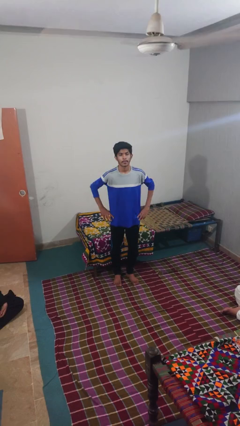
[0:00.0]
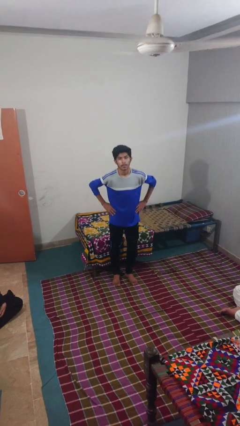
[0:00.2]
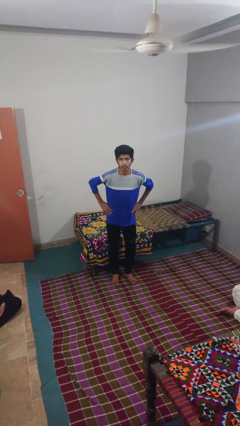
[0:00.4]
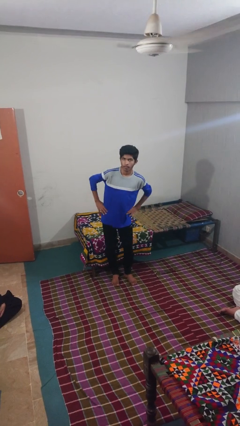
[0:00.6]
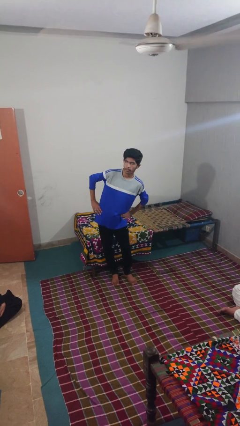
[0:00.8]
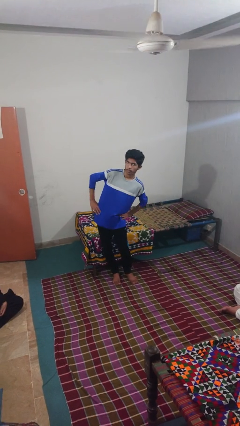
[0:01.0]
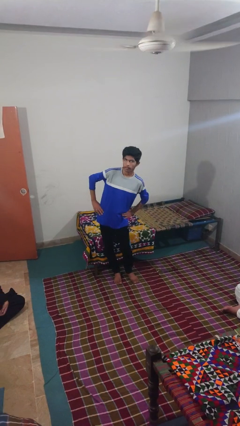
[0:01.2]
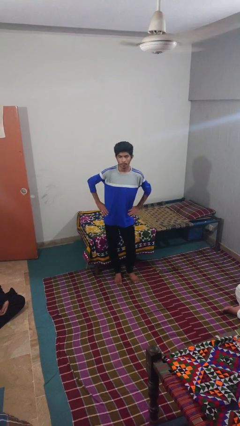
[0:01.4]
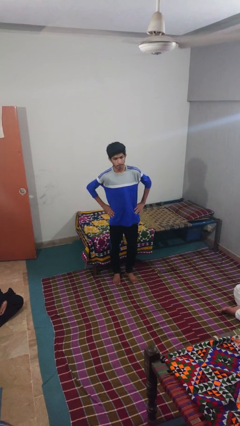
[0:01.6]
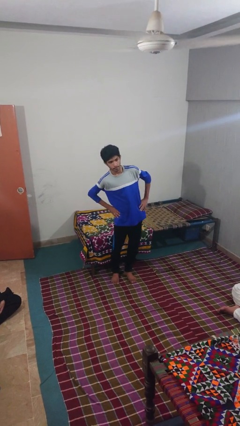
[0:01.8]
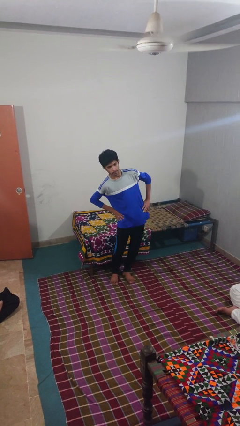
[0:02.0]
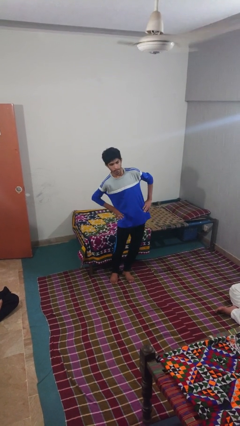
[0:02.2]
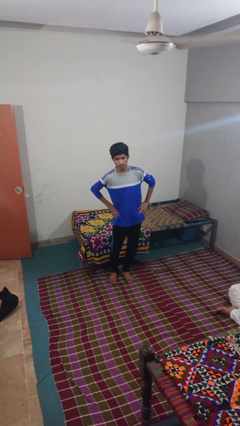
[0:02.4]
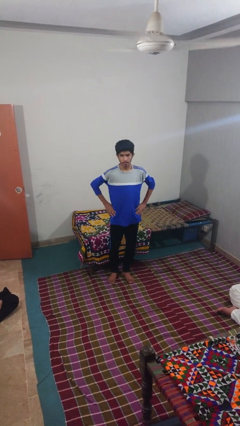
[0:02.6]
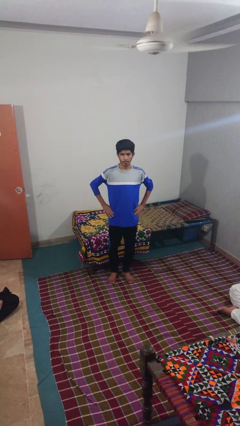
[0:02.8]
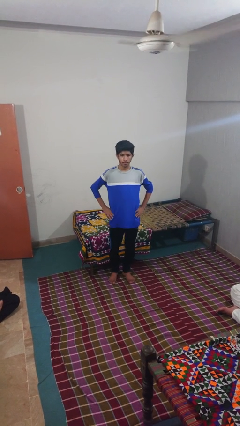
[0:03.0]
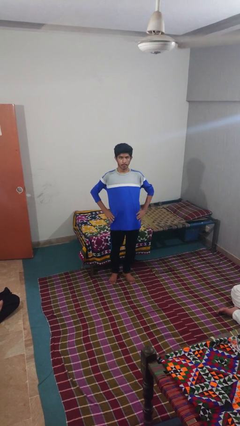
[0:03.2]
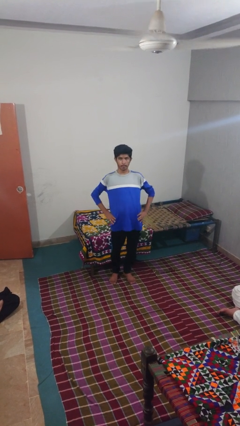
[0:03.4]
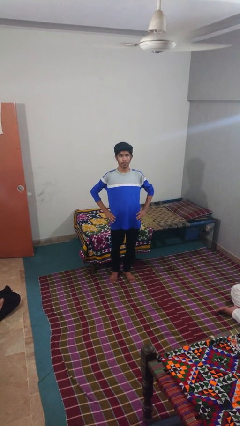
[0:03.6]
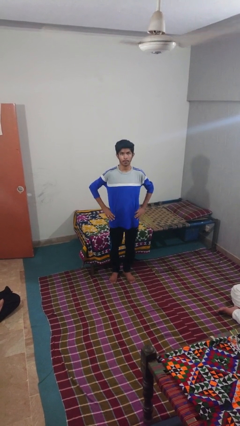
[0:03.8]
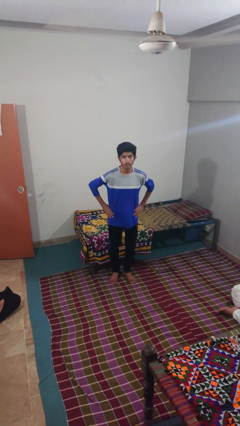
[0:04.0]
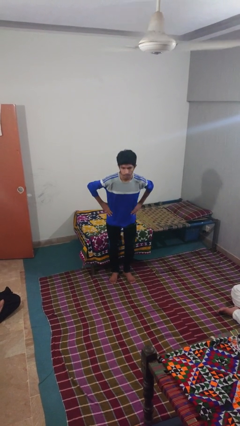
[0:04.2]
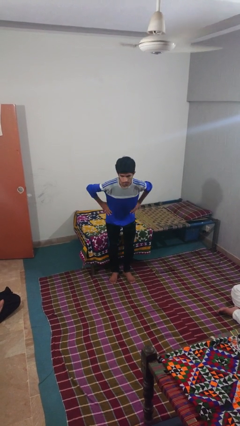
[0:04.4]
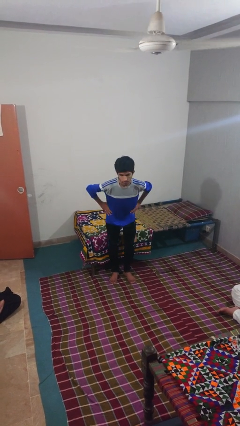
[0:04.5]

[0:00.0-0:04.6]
person wiggles hips

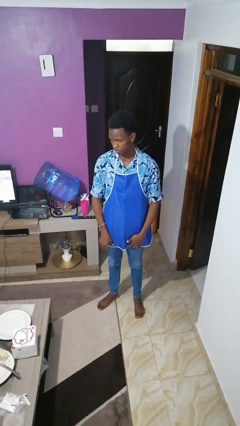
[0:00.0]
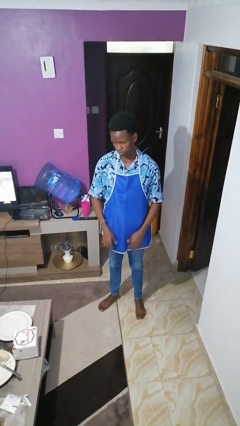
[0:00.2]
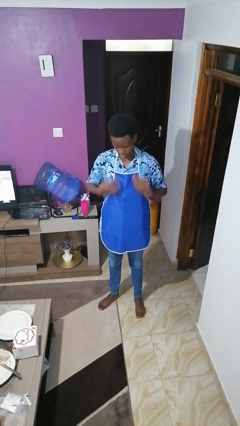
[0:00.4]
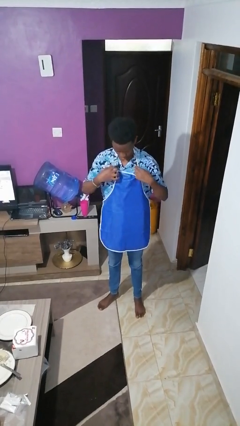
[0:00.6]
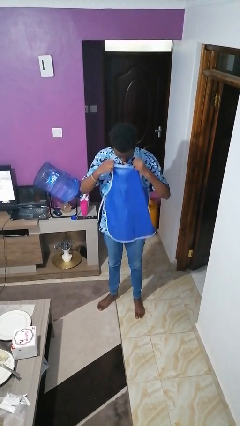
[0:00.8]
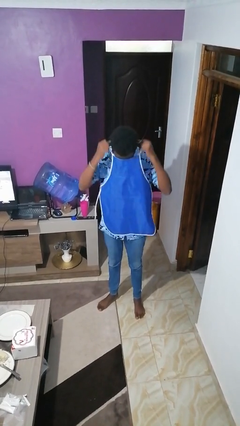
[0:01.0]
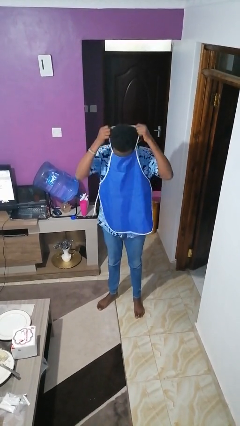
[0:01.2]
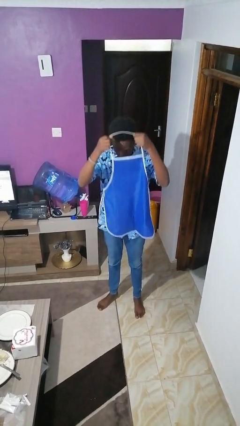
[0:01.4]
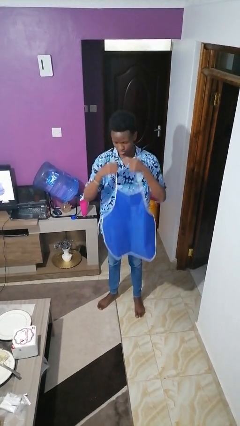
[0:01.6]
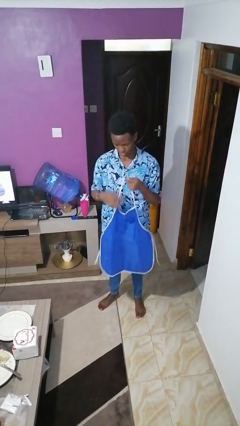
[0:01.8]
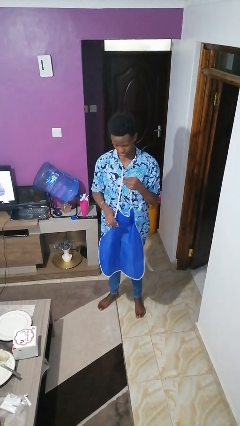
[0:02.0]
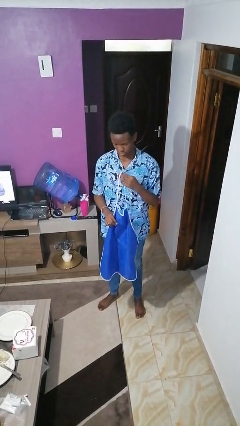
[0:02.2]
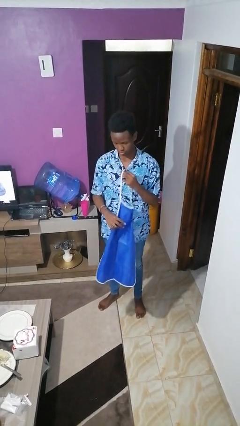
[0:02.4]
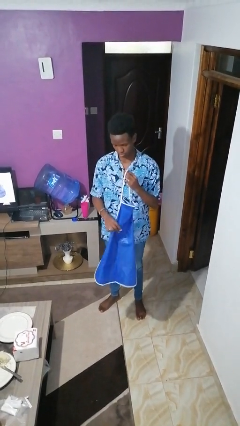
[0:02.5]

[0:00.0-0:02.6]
person takes off apron

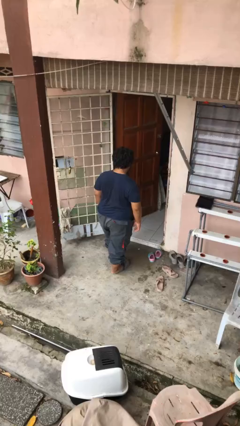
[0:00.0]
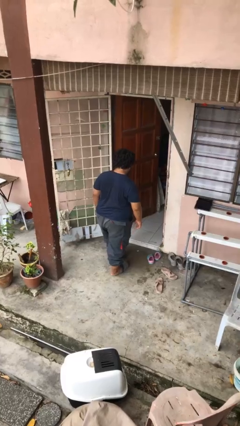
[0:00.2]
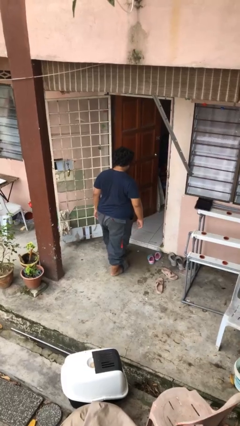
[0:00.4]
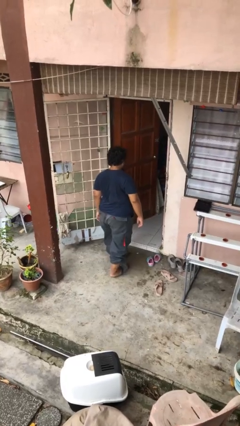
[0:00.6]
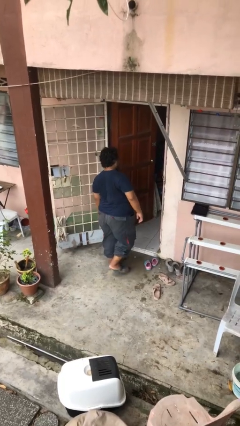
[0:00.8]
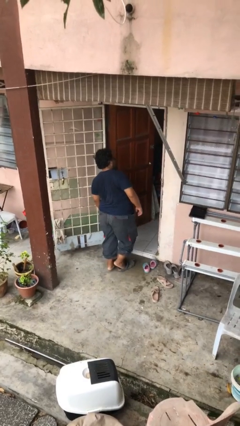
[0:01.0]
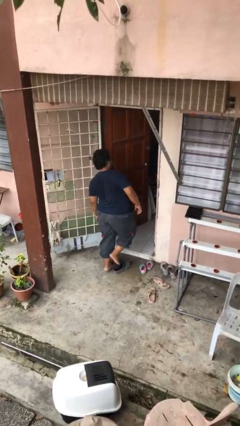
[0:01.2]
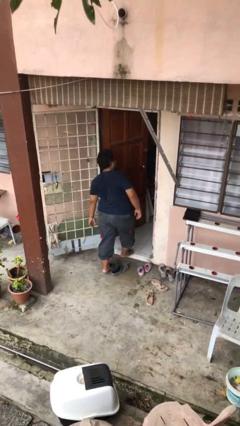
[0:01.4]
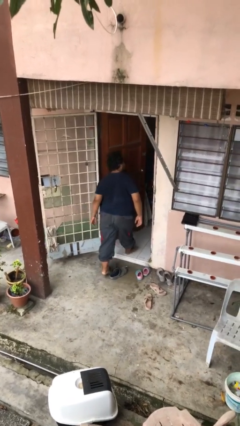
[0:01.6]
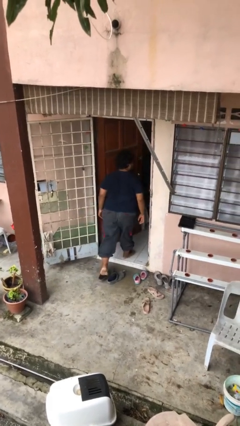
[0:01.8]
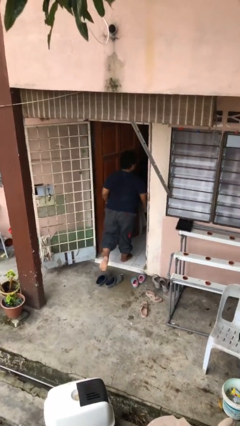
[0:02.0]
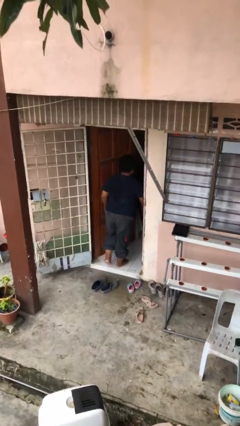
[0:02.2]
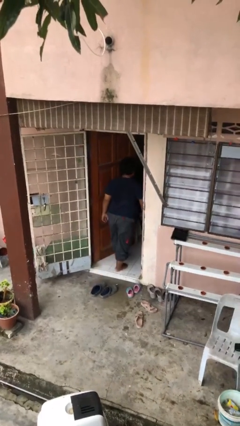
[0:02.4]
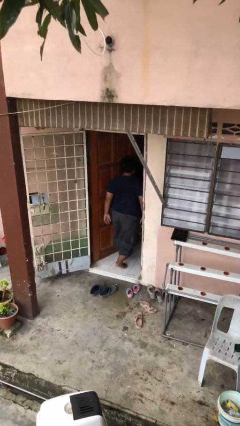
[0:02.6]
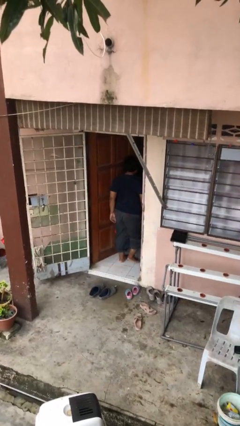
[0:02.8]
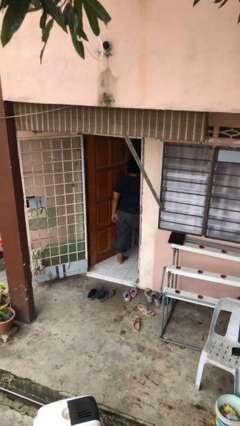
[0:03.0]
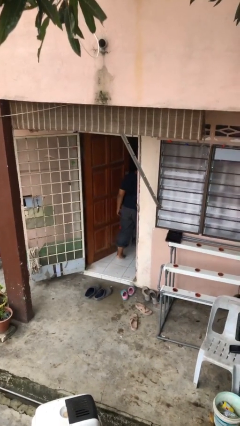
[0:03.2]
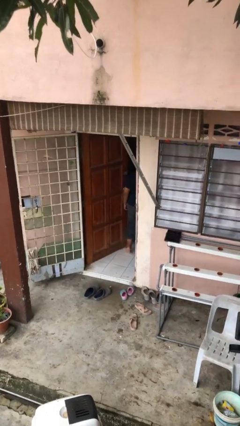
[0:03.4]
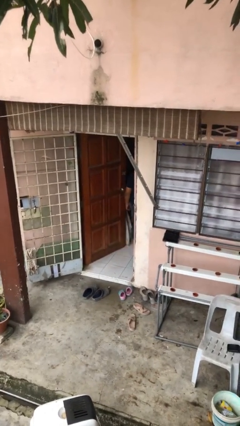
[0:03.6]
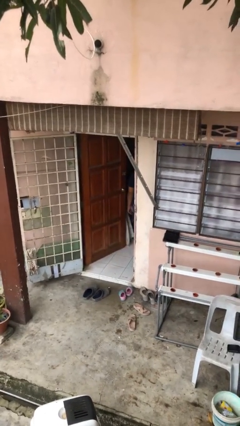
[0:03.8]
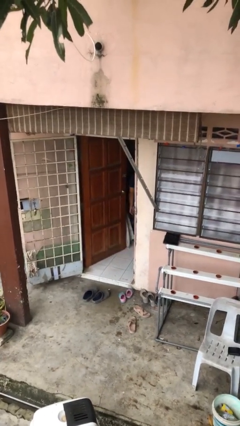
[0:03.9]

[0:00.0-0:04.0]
person exits scene through structure

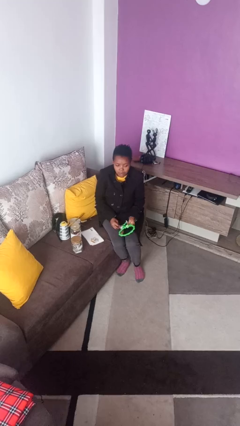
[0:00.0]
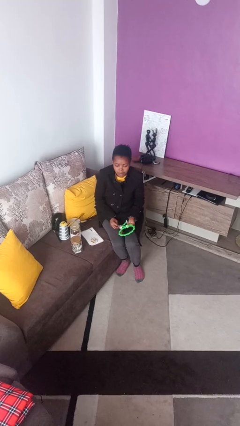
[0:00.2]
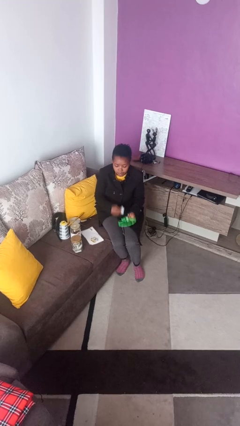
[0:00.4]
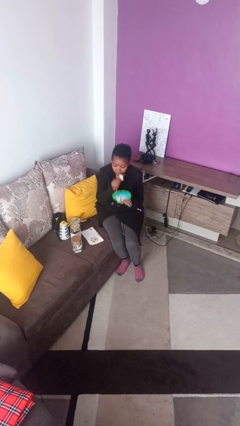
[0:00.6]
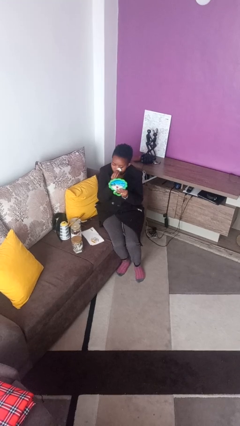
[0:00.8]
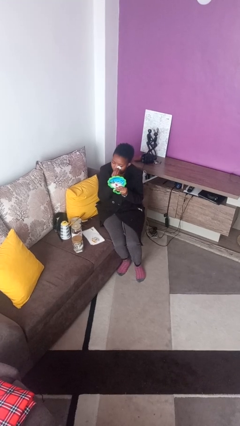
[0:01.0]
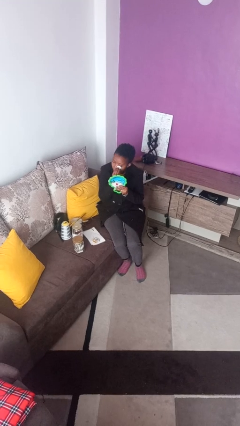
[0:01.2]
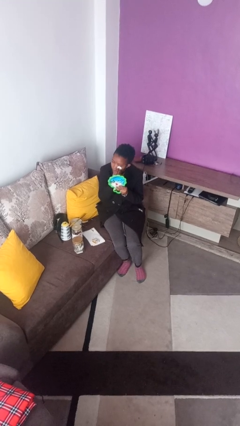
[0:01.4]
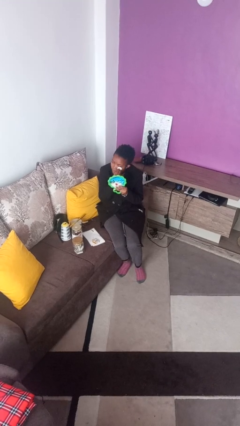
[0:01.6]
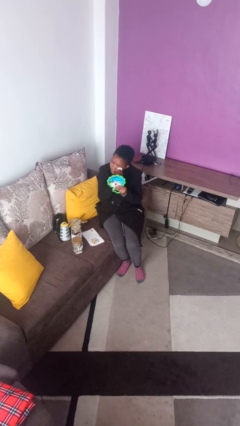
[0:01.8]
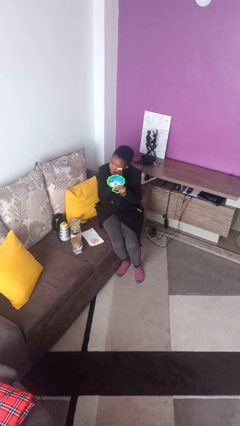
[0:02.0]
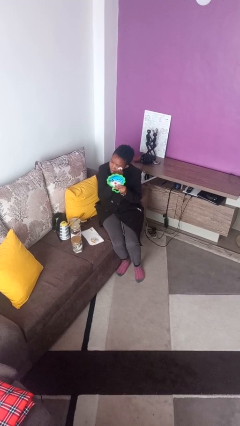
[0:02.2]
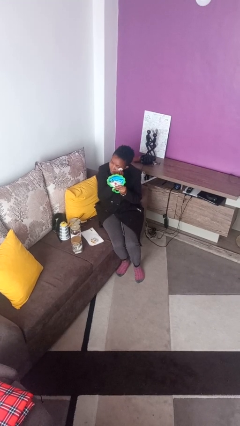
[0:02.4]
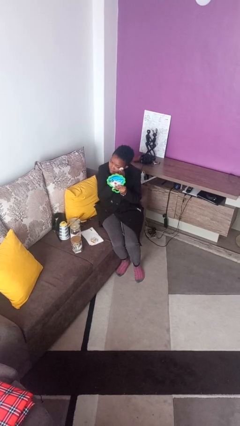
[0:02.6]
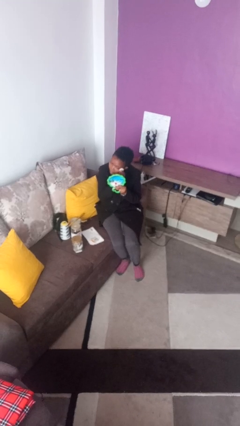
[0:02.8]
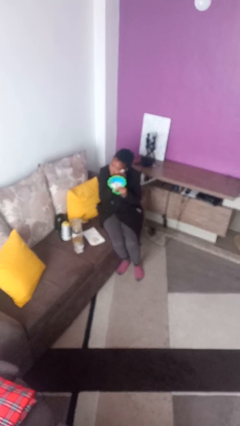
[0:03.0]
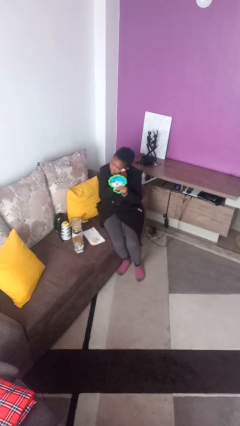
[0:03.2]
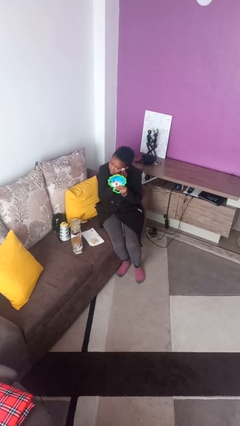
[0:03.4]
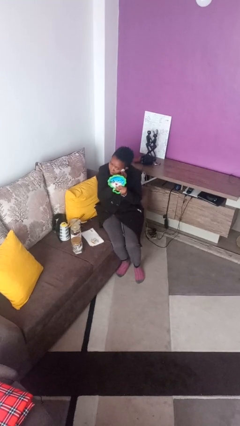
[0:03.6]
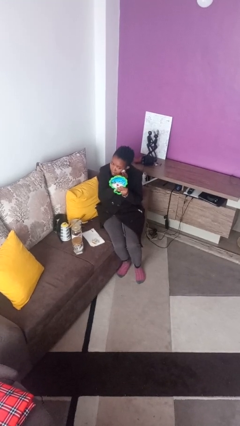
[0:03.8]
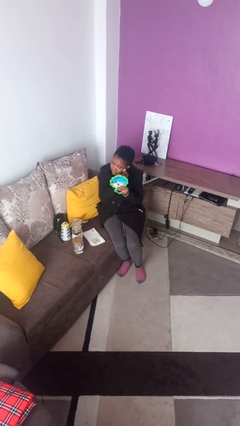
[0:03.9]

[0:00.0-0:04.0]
person applies foundation makeup

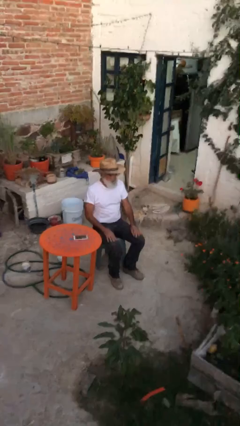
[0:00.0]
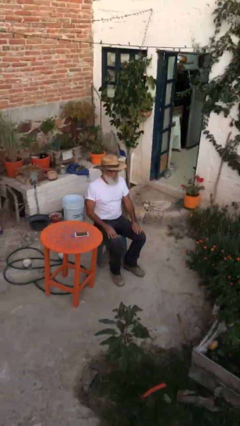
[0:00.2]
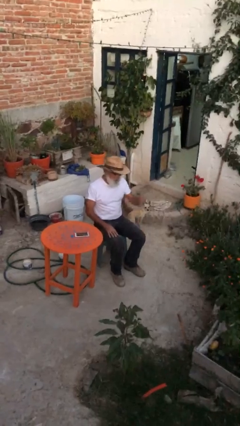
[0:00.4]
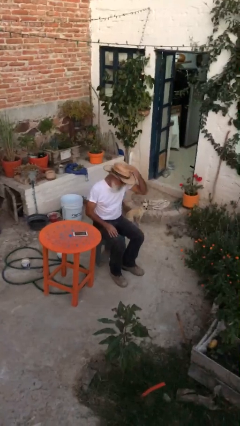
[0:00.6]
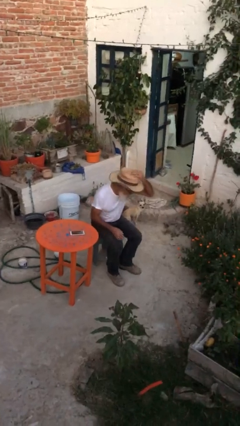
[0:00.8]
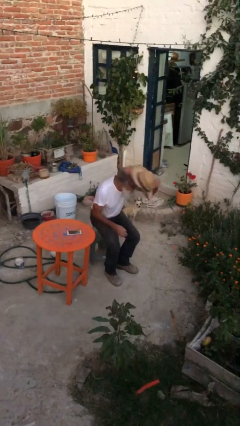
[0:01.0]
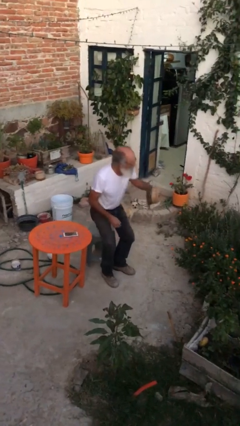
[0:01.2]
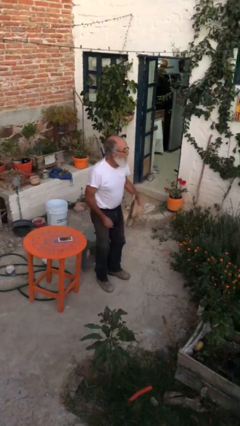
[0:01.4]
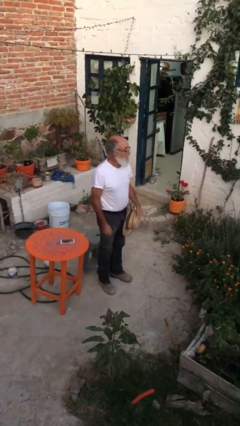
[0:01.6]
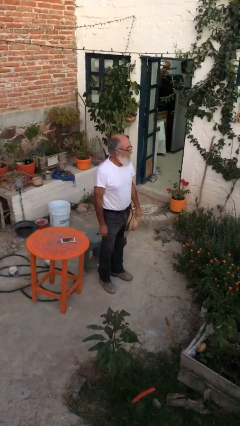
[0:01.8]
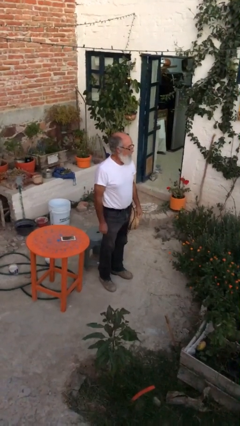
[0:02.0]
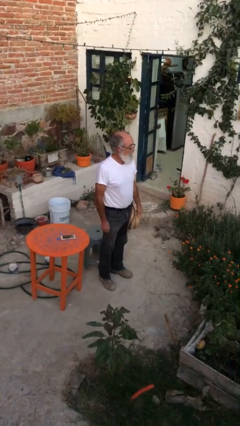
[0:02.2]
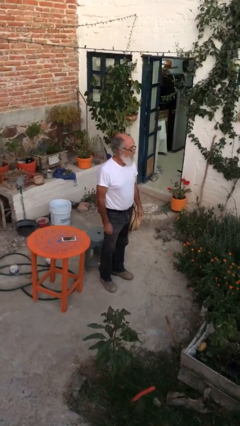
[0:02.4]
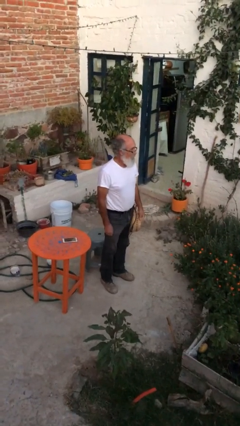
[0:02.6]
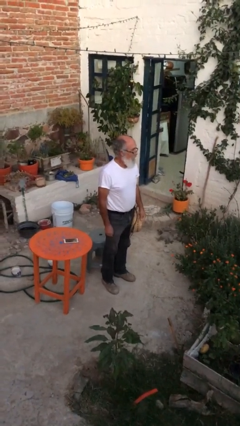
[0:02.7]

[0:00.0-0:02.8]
person stands up
